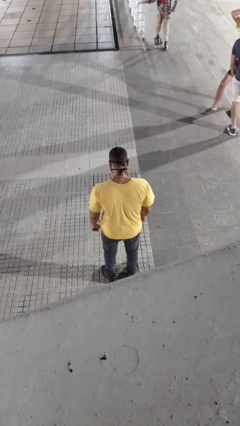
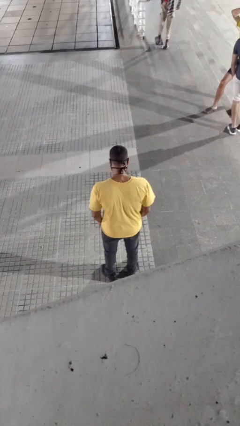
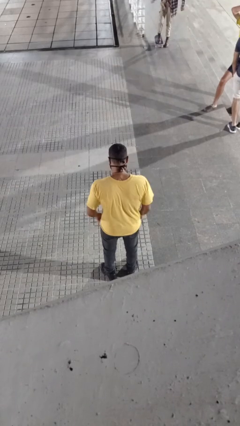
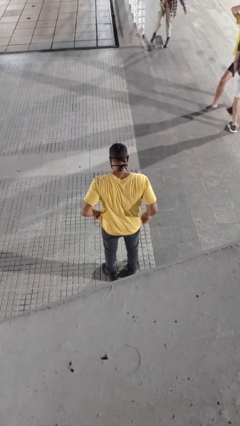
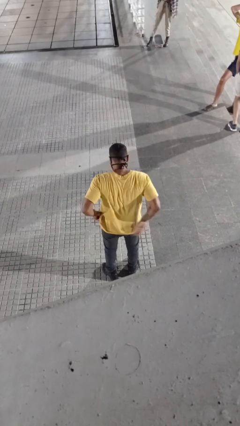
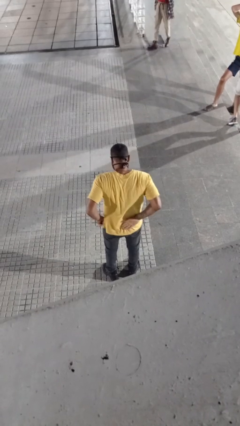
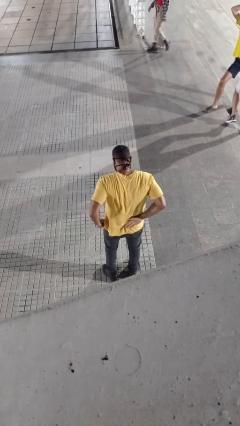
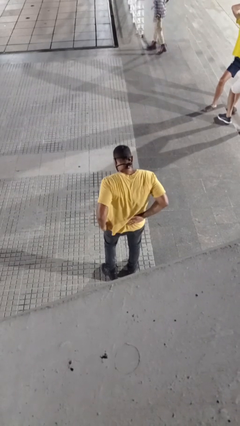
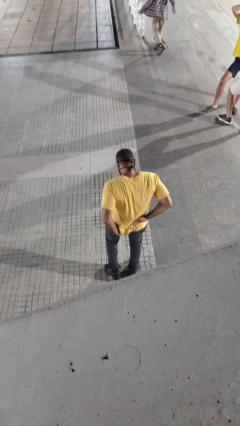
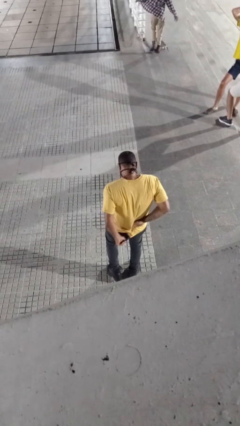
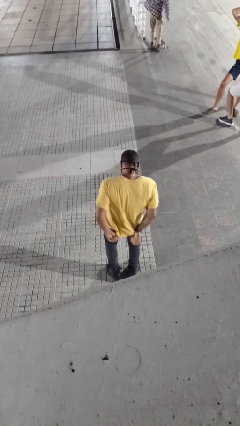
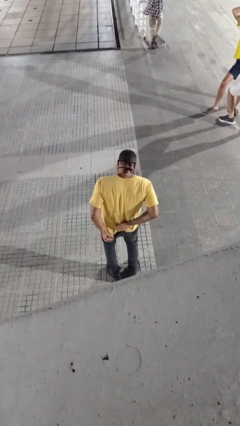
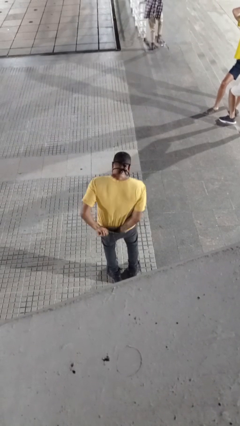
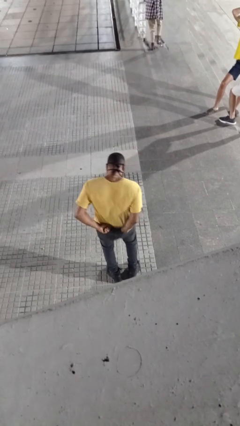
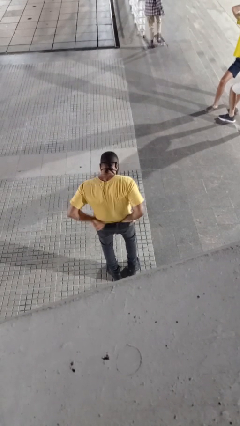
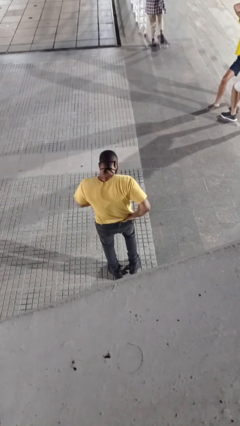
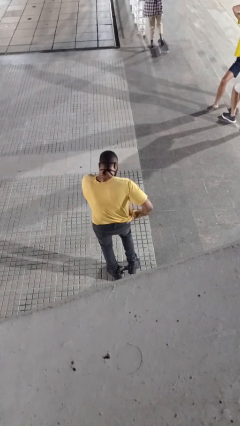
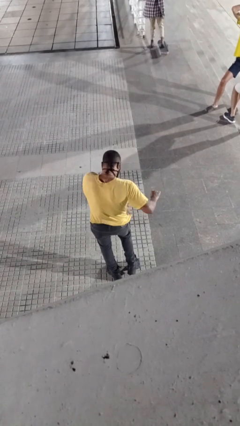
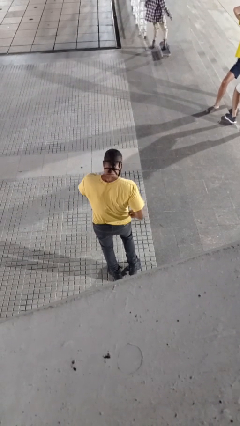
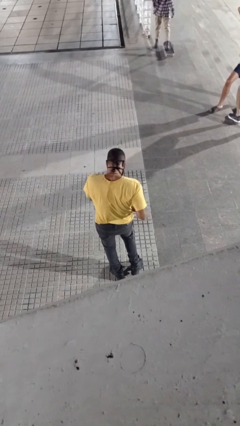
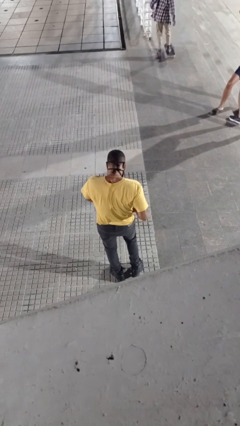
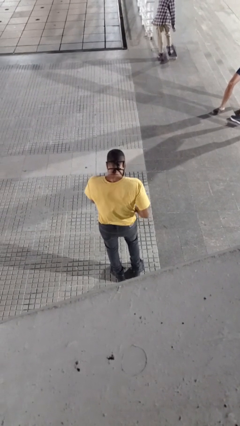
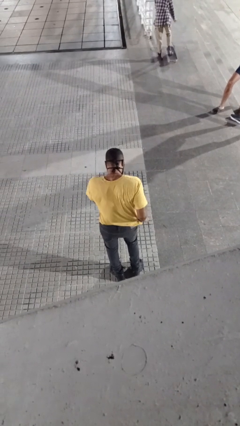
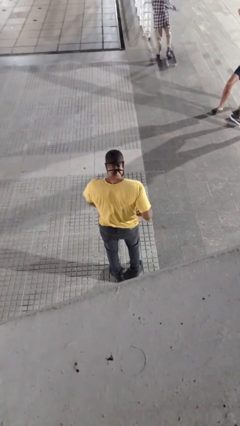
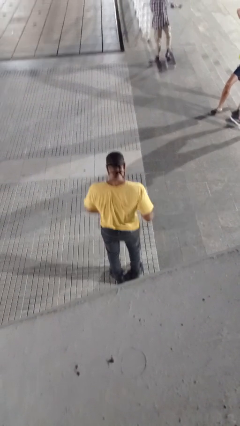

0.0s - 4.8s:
person tucks in shirt

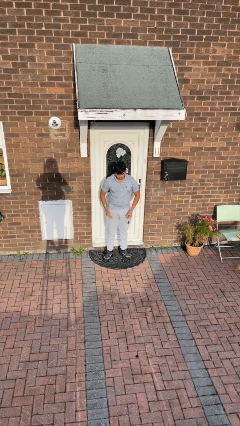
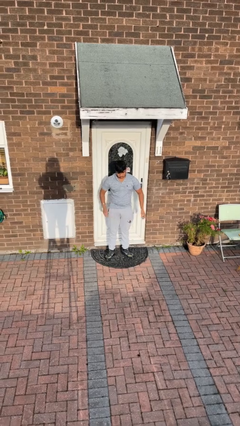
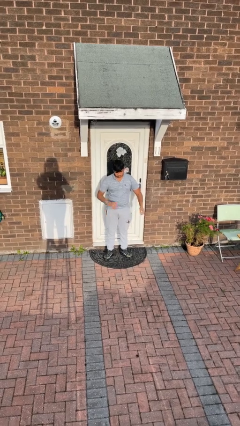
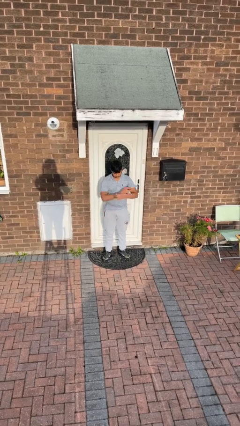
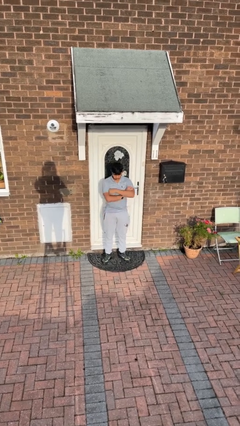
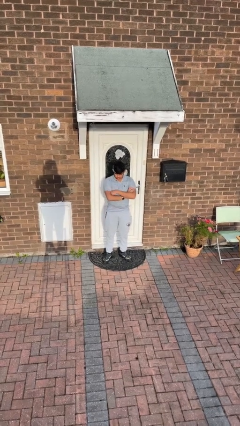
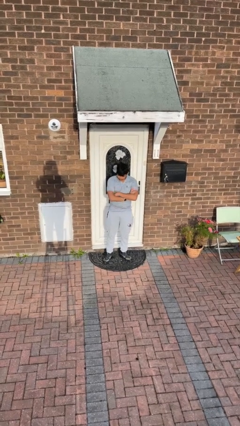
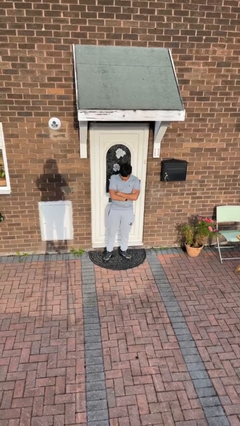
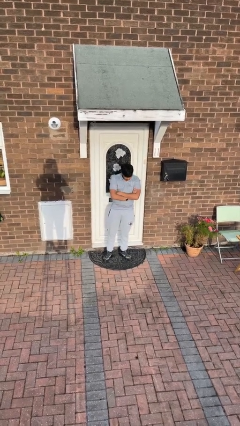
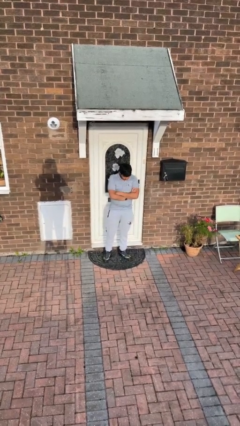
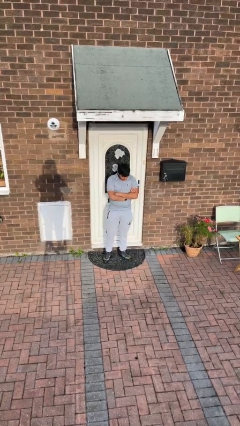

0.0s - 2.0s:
person crosses arms

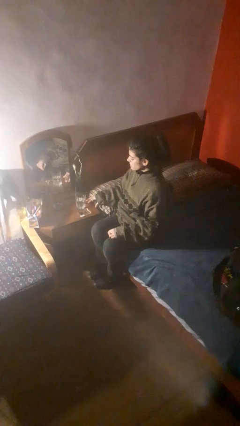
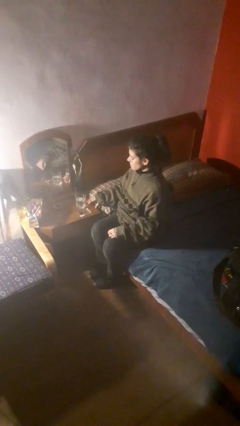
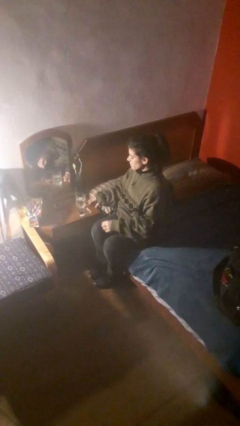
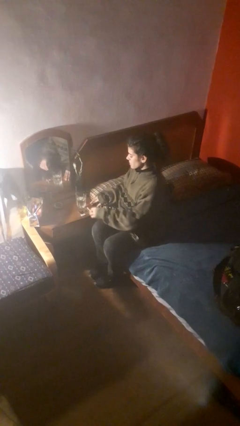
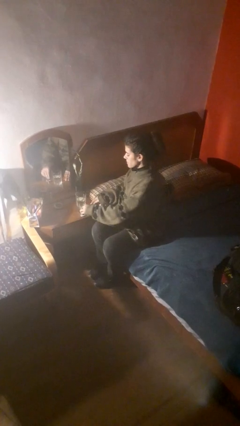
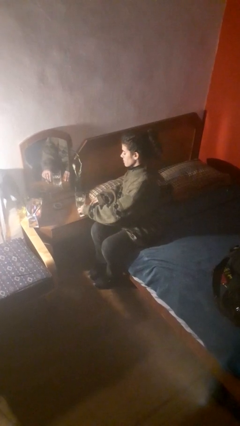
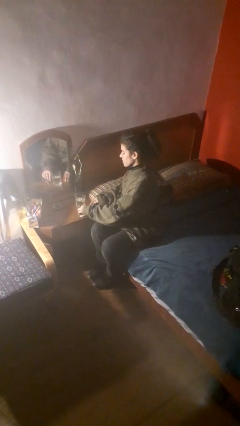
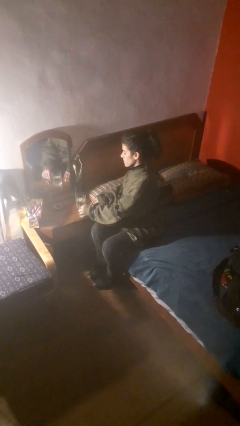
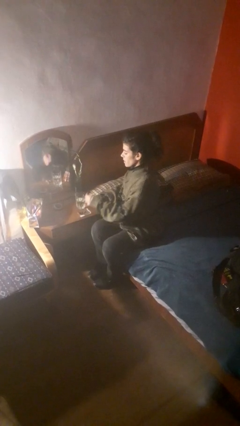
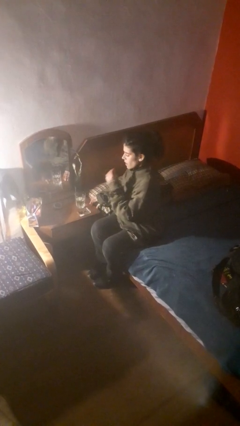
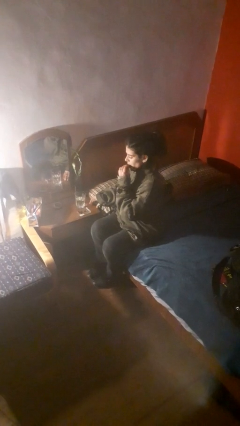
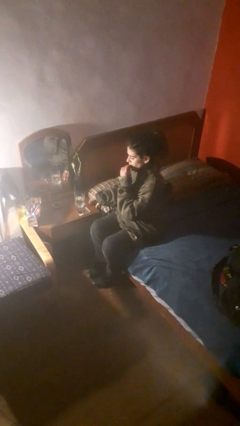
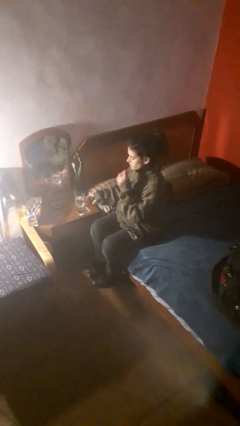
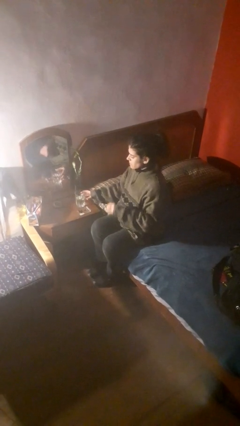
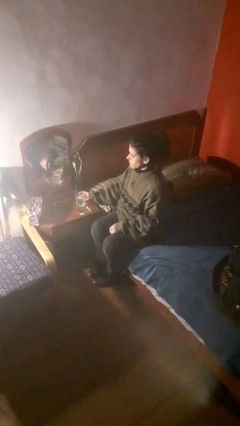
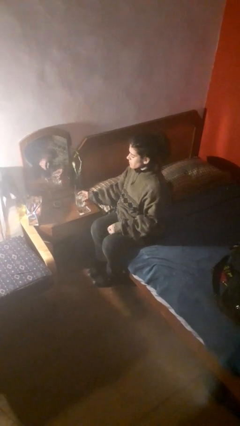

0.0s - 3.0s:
person takes medicine pills

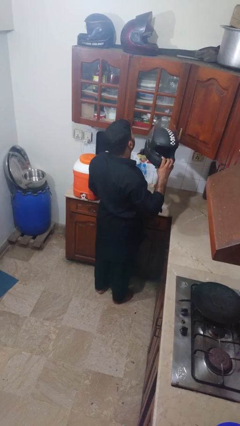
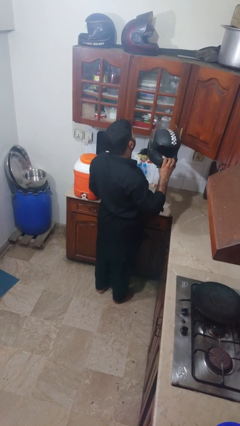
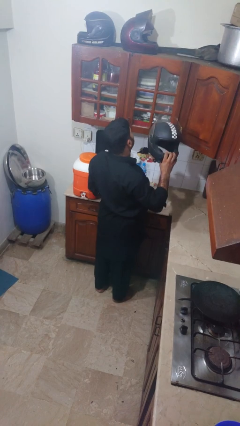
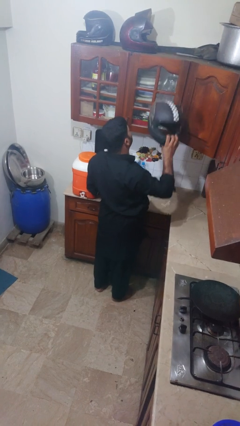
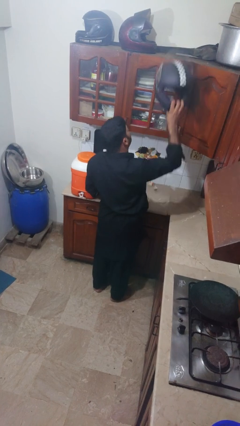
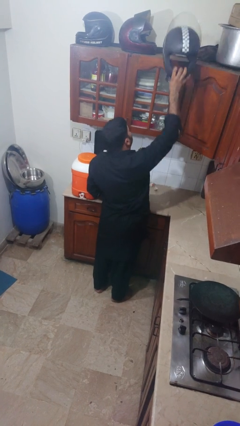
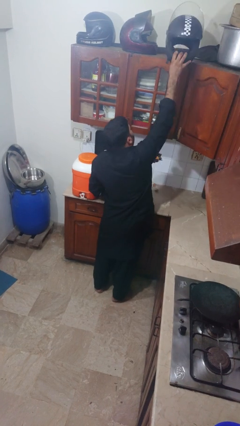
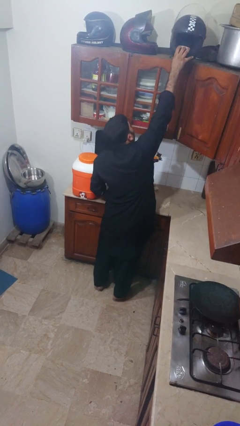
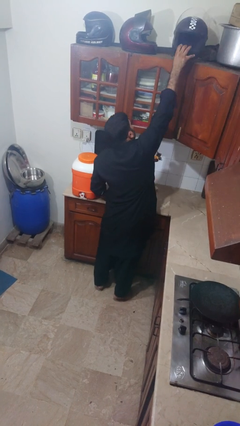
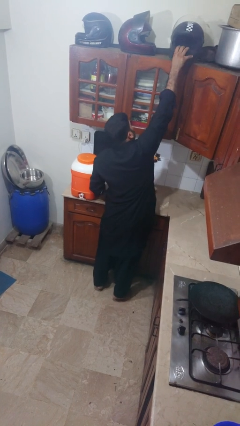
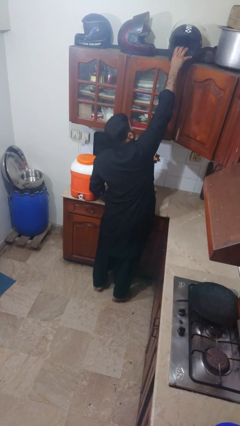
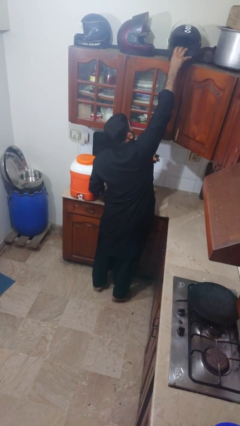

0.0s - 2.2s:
person puts down object on shelf

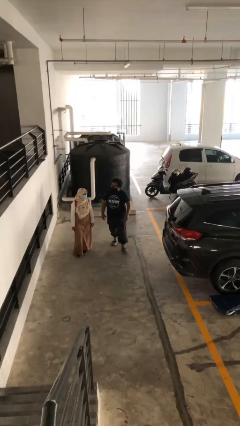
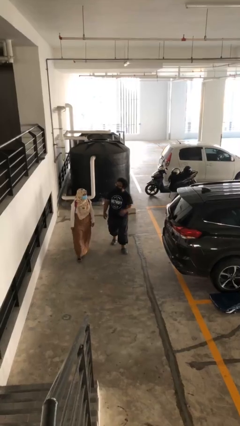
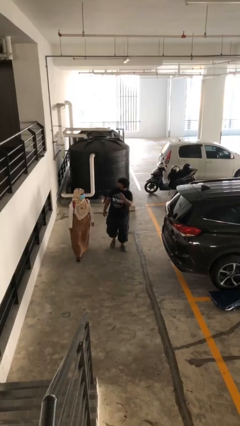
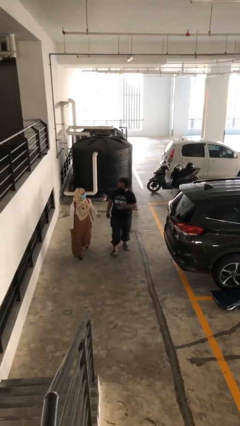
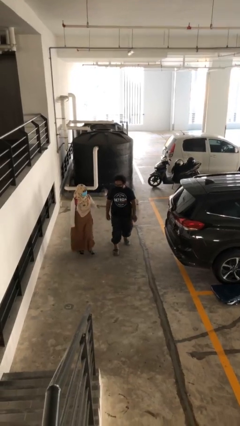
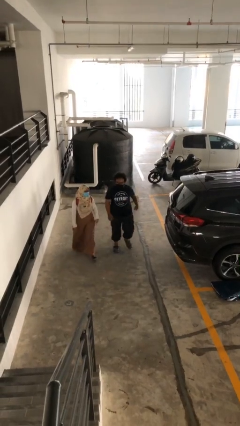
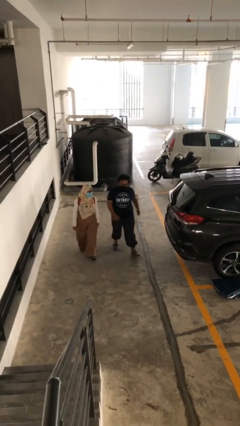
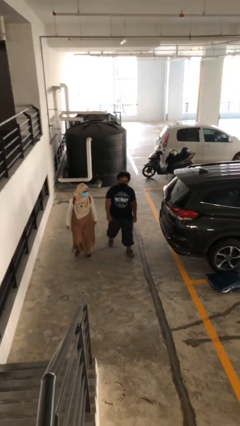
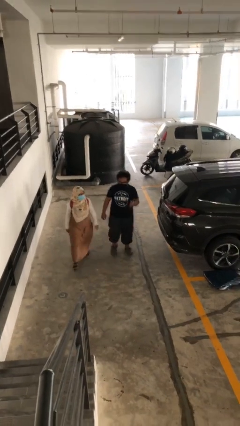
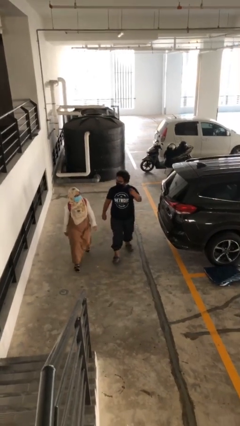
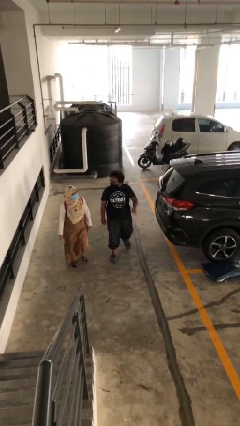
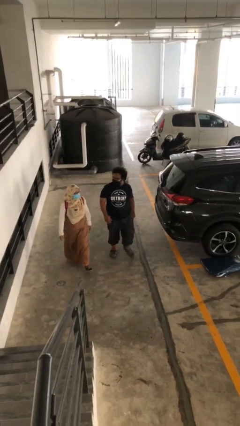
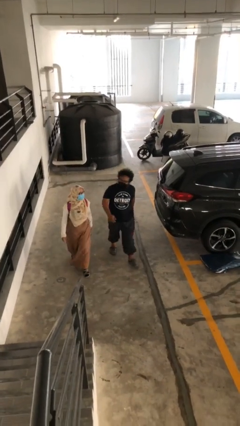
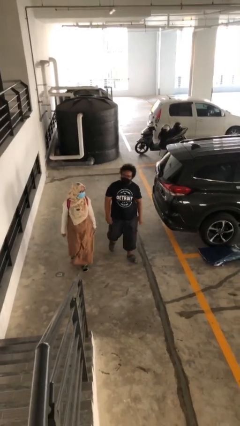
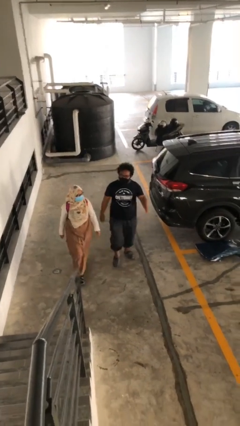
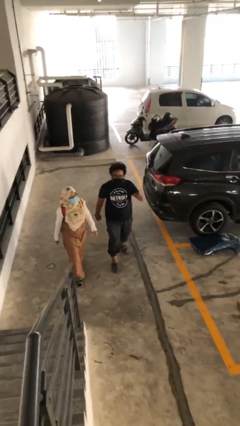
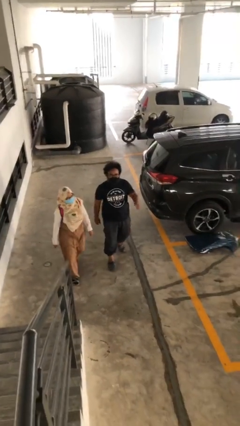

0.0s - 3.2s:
person talks to person

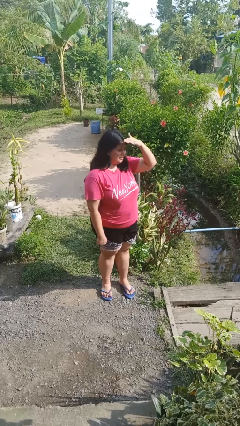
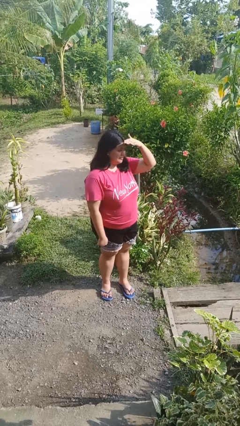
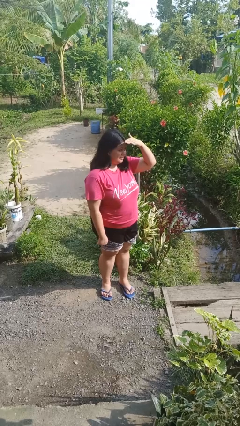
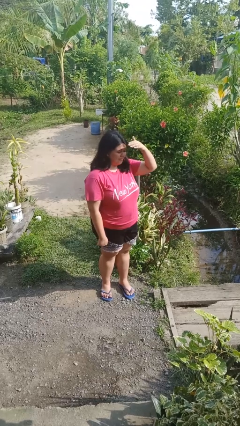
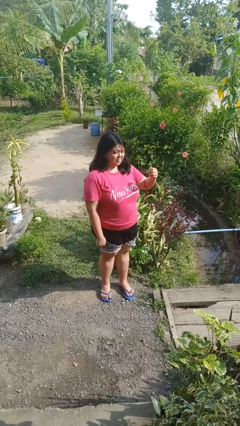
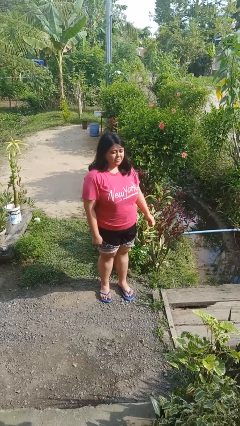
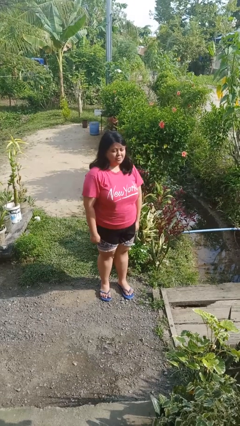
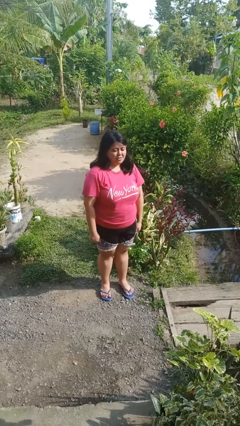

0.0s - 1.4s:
person shades eyes

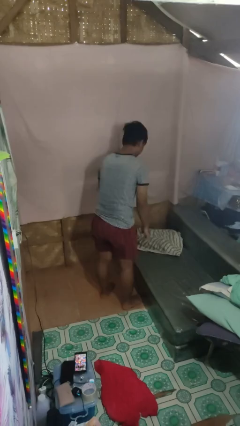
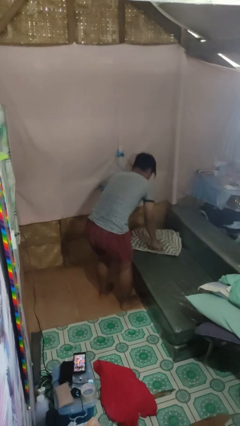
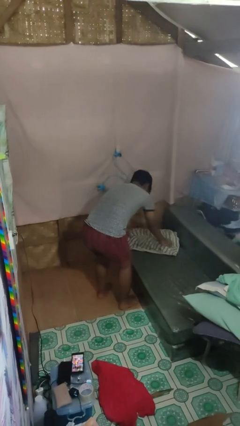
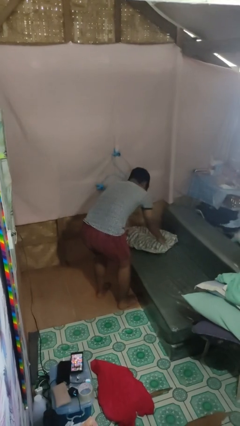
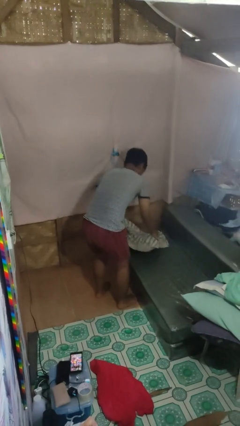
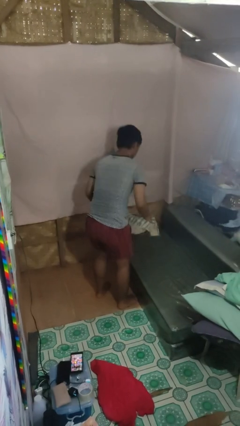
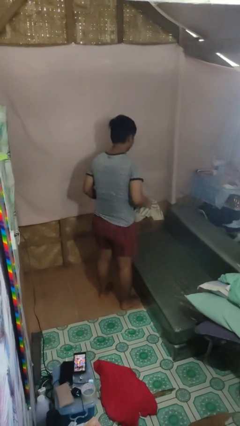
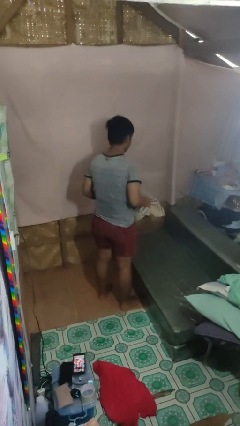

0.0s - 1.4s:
person picks up object from couch
